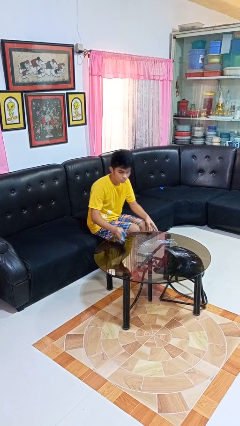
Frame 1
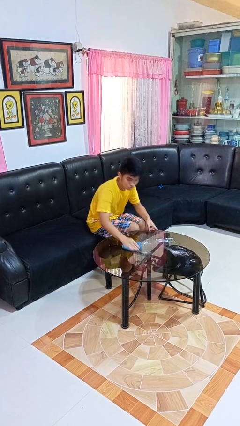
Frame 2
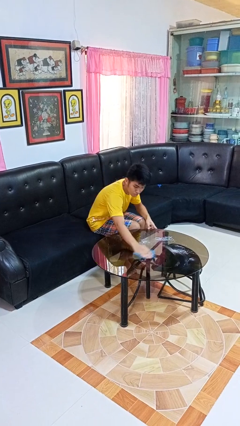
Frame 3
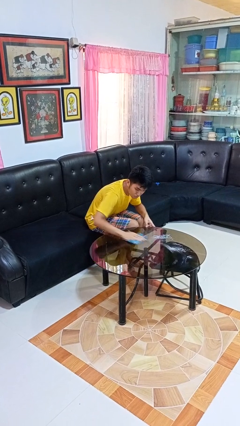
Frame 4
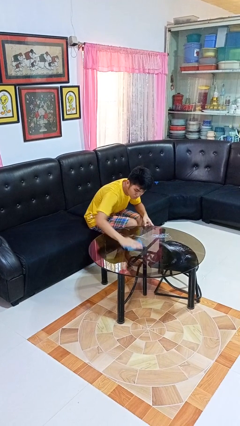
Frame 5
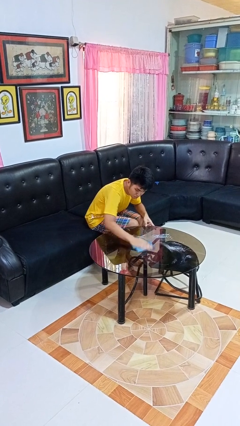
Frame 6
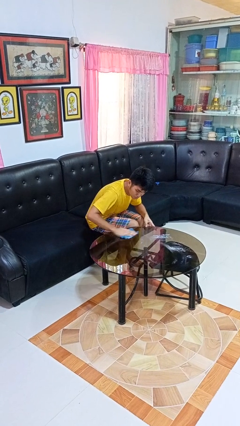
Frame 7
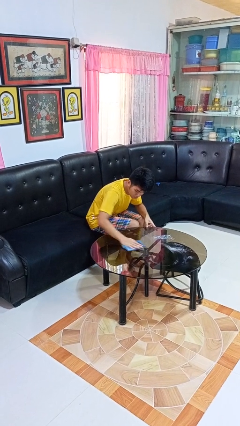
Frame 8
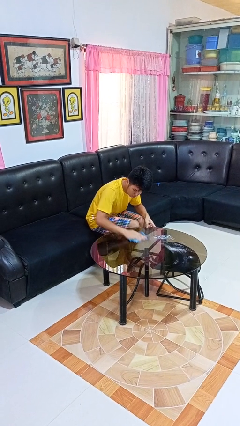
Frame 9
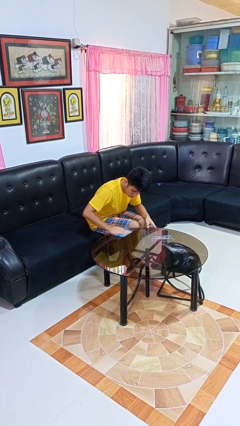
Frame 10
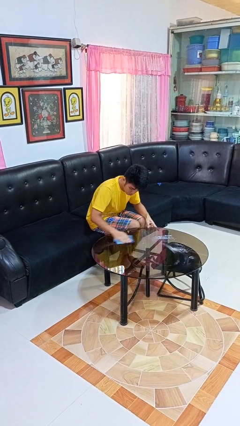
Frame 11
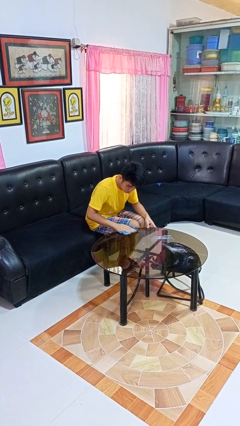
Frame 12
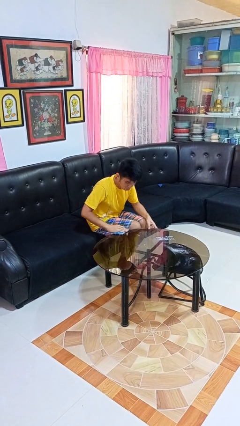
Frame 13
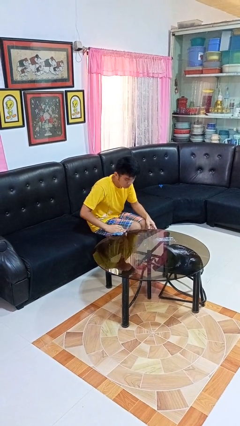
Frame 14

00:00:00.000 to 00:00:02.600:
person cleans table with rag

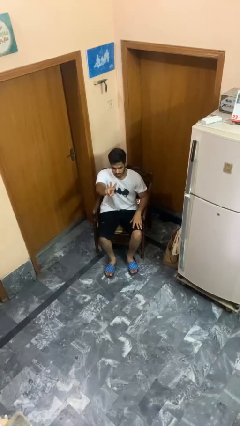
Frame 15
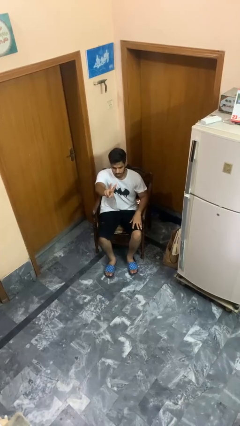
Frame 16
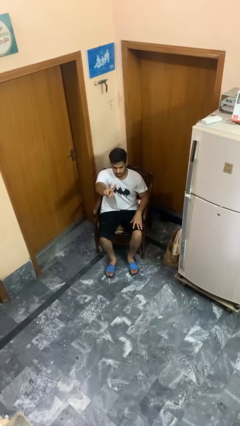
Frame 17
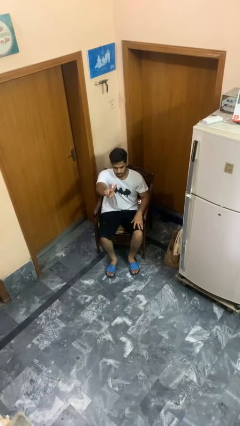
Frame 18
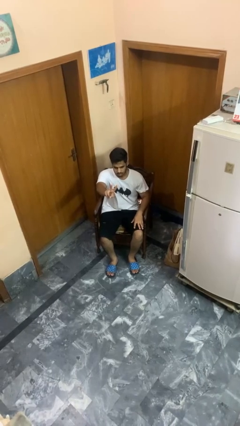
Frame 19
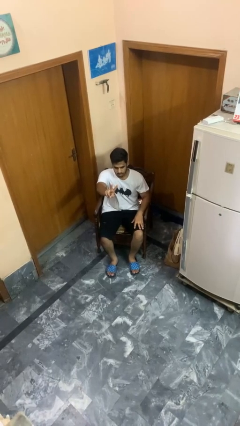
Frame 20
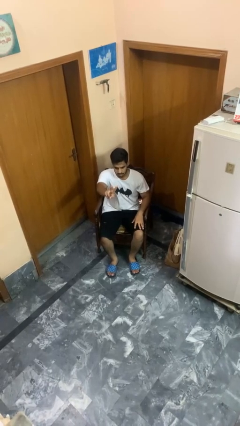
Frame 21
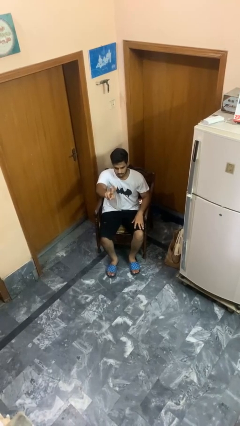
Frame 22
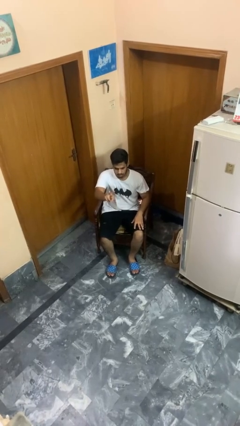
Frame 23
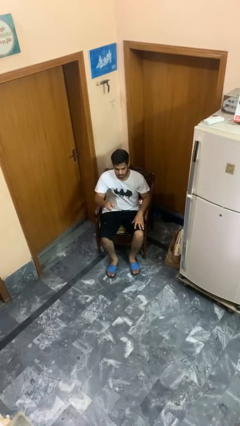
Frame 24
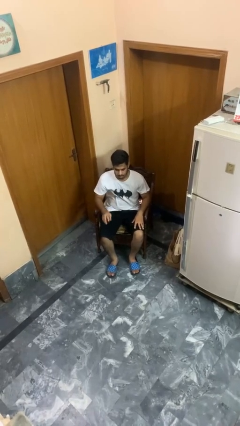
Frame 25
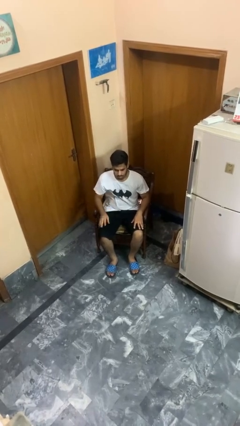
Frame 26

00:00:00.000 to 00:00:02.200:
person gestures peace

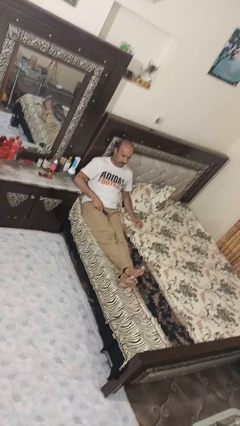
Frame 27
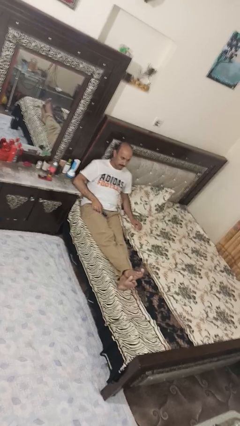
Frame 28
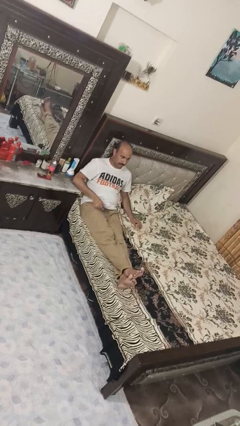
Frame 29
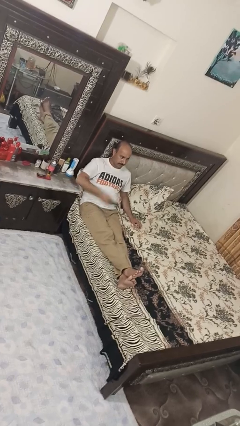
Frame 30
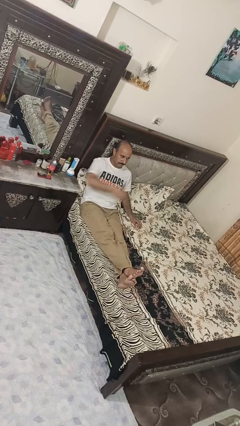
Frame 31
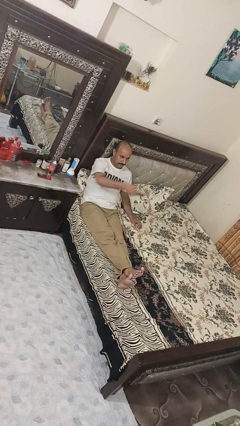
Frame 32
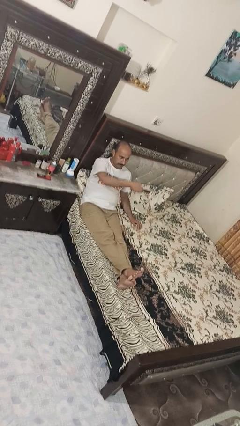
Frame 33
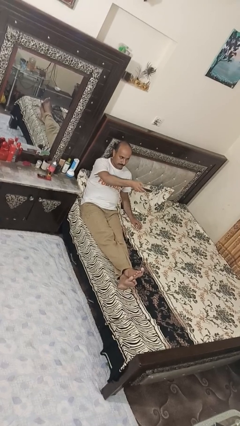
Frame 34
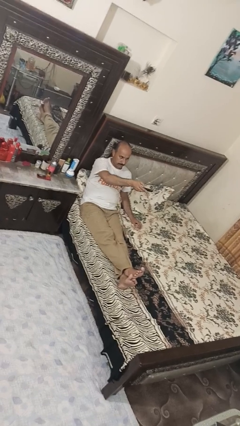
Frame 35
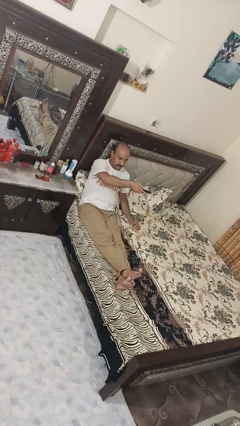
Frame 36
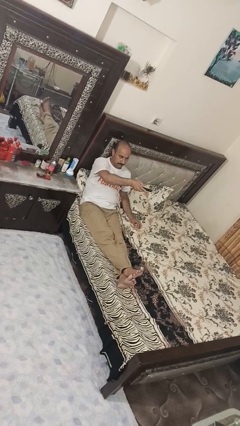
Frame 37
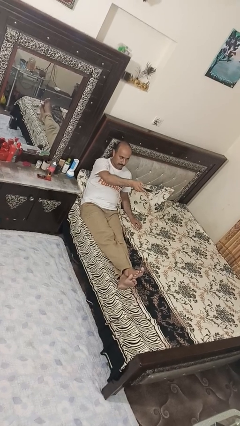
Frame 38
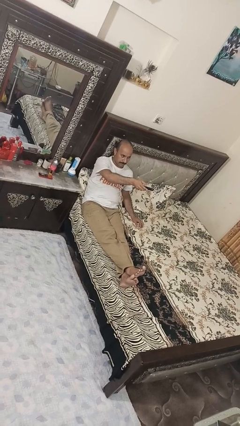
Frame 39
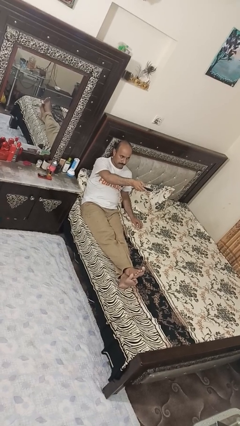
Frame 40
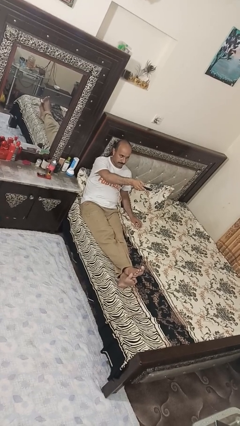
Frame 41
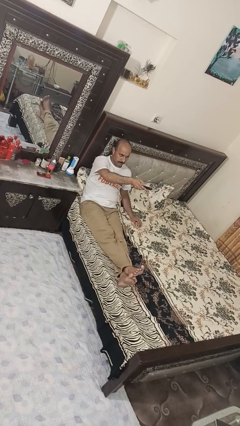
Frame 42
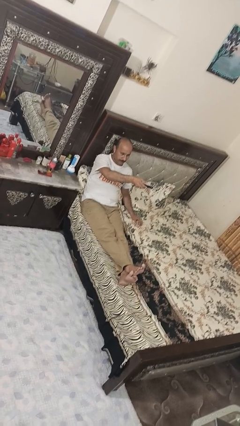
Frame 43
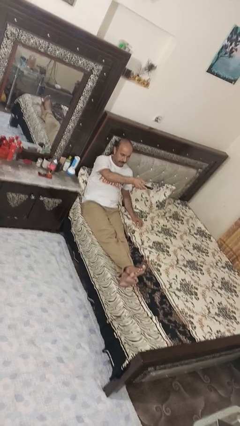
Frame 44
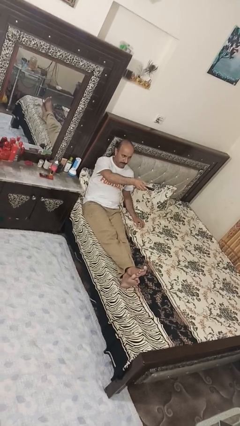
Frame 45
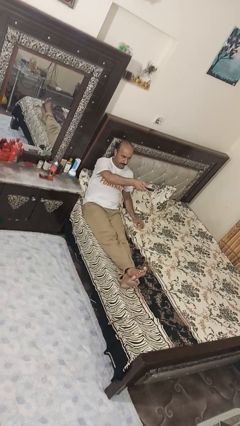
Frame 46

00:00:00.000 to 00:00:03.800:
person uses television remote

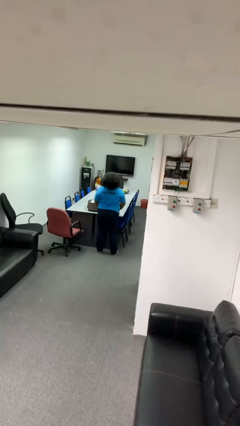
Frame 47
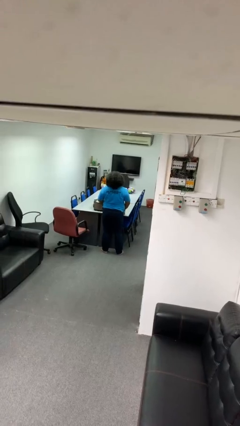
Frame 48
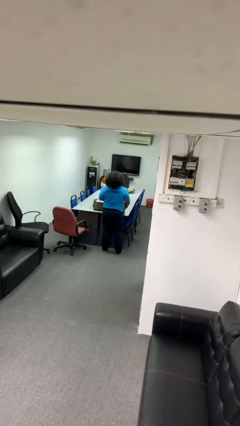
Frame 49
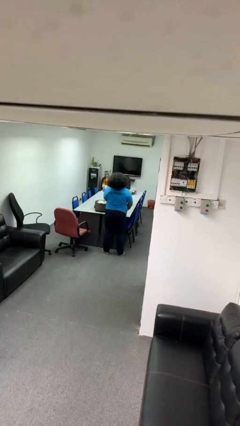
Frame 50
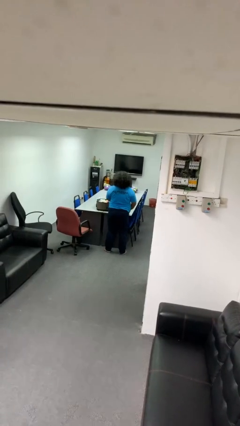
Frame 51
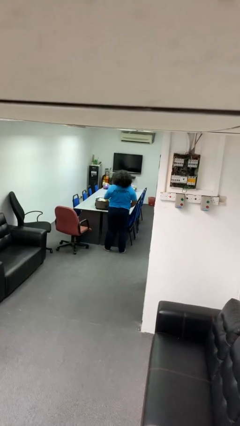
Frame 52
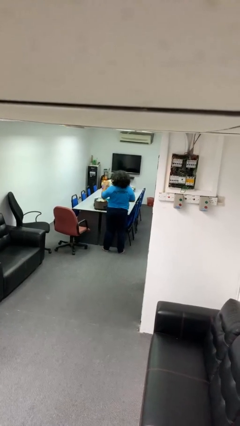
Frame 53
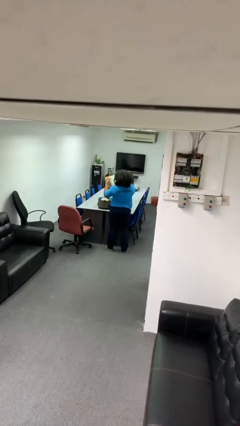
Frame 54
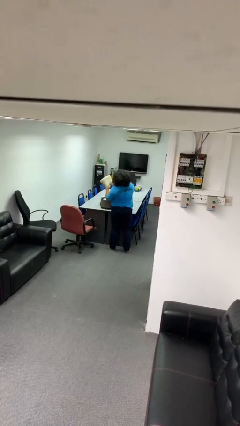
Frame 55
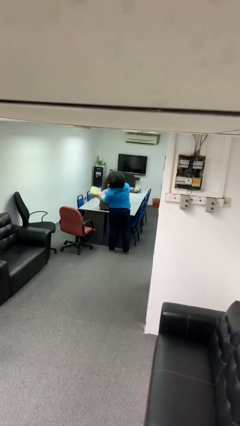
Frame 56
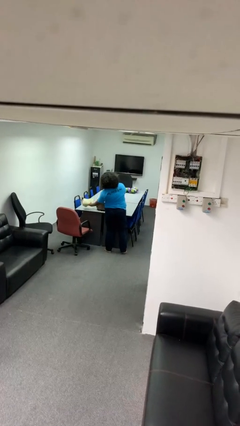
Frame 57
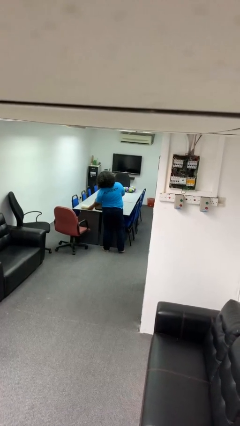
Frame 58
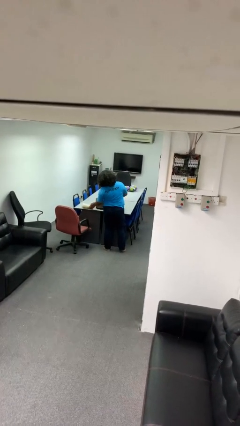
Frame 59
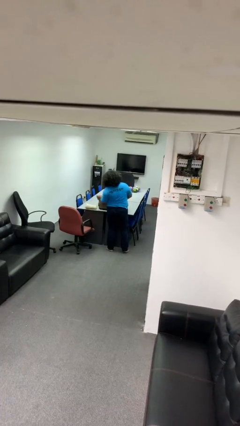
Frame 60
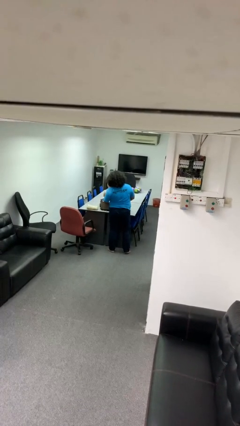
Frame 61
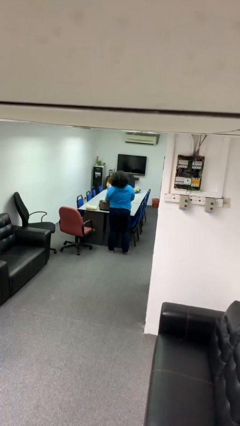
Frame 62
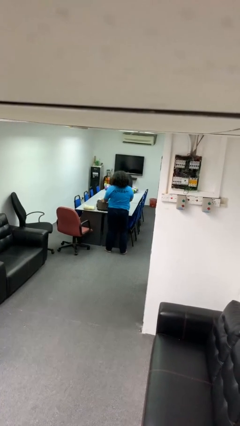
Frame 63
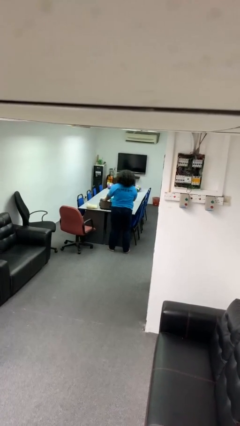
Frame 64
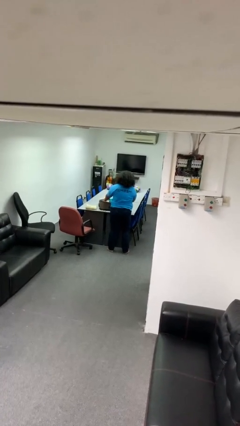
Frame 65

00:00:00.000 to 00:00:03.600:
person unloads clothes from suitcase

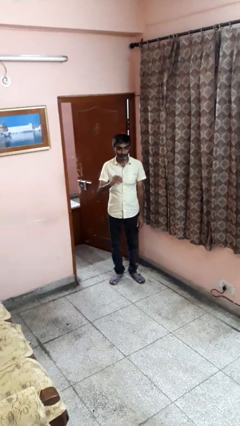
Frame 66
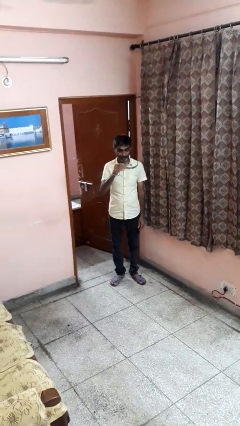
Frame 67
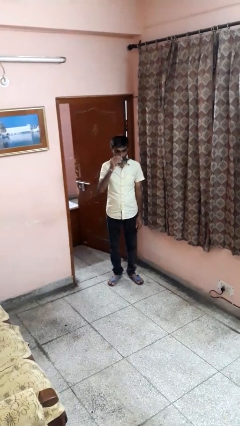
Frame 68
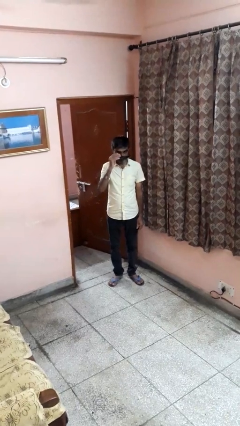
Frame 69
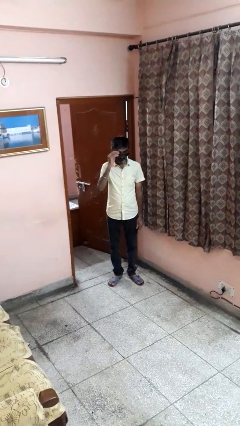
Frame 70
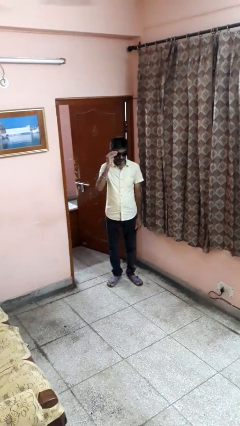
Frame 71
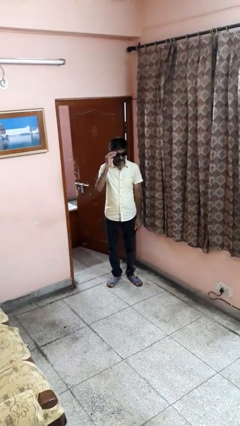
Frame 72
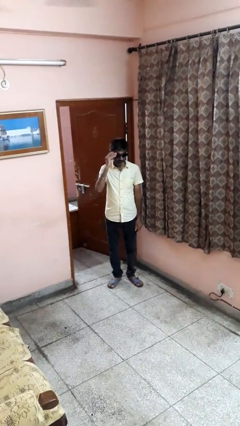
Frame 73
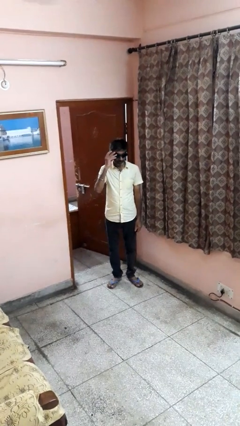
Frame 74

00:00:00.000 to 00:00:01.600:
person puts on sunglasses

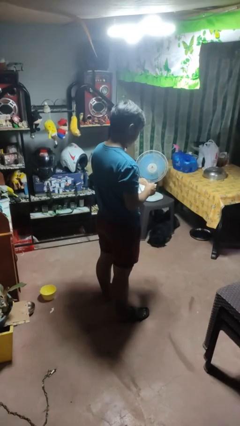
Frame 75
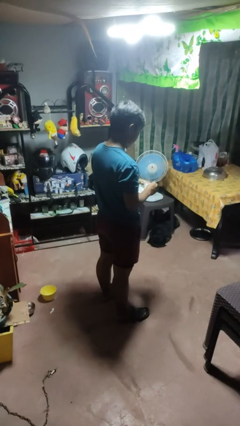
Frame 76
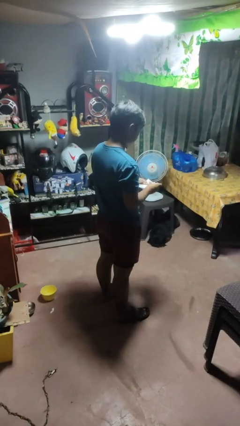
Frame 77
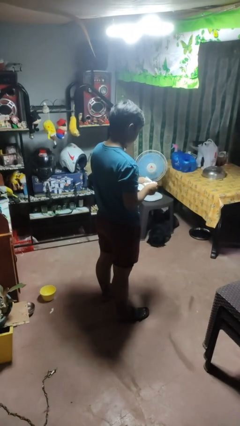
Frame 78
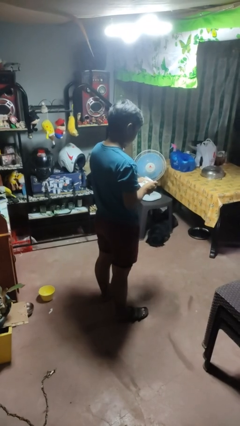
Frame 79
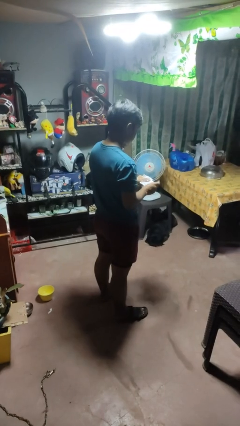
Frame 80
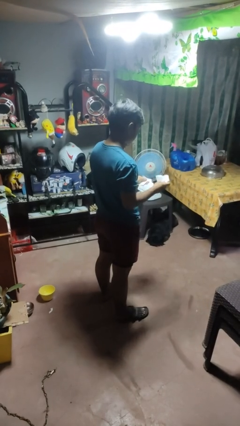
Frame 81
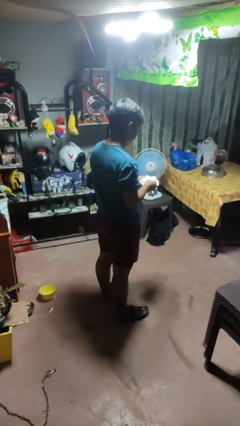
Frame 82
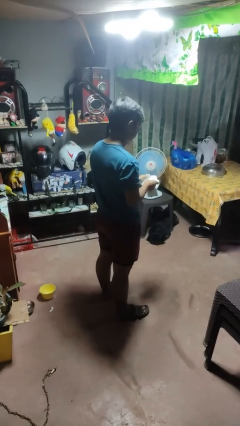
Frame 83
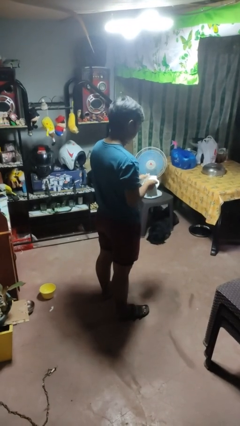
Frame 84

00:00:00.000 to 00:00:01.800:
person tears paper

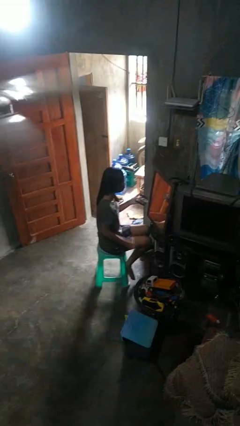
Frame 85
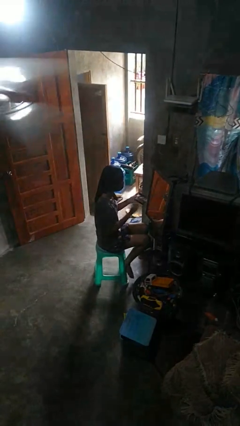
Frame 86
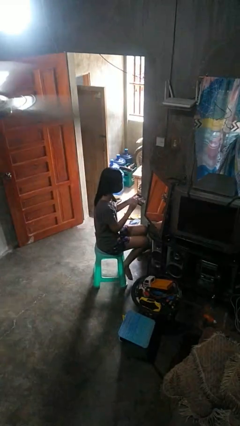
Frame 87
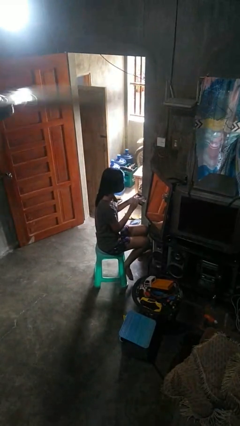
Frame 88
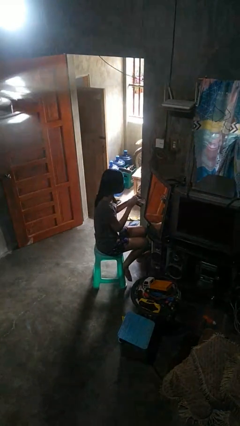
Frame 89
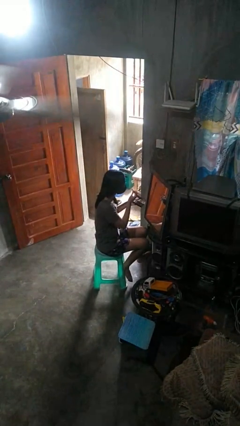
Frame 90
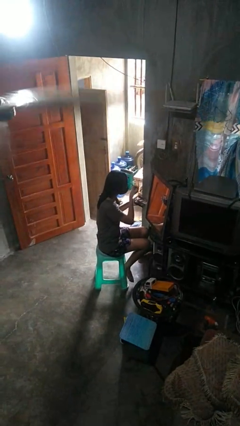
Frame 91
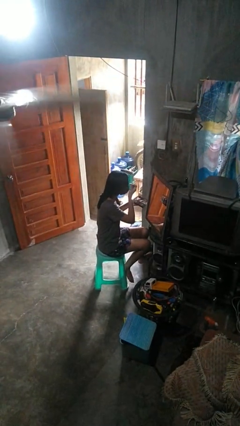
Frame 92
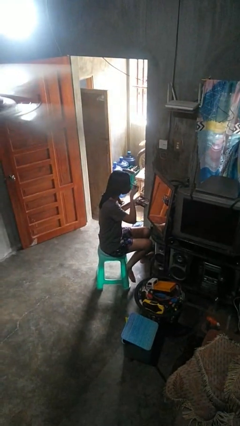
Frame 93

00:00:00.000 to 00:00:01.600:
person applies eye makeup

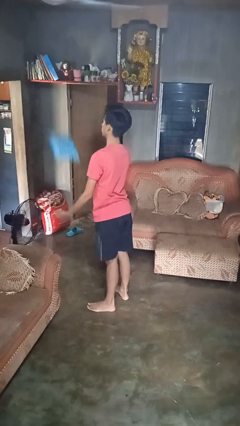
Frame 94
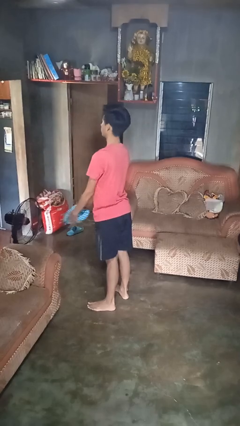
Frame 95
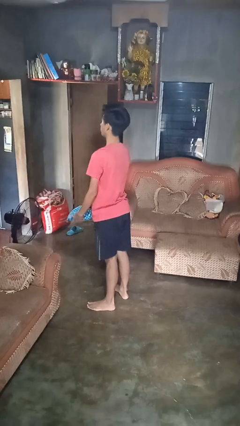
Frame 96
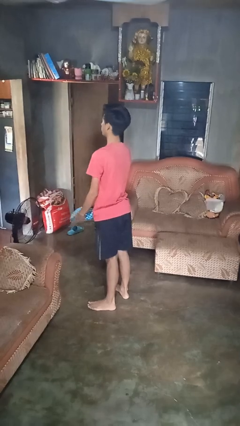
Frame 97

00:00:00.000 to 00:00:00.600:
person drops object
